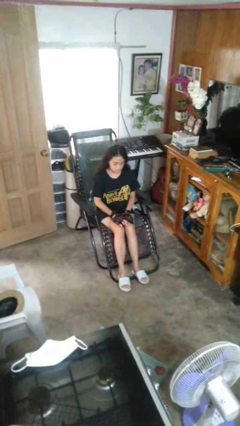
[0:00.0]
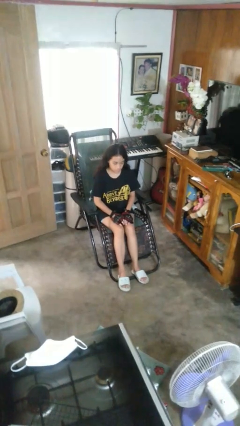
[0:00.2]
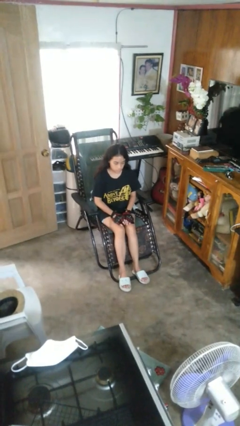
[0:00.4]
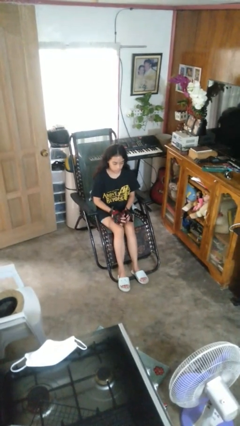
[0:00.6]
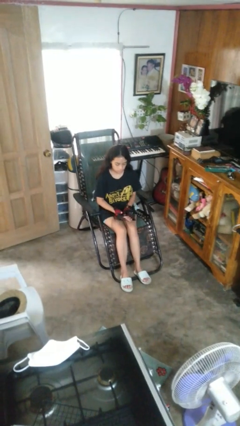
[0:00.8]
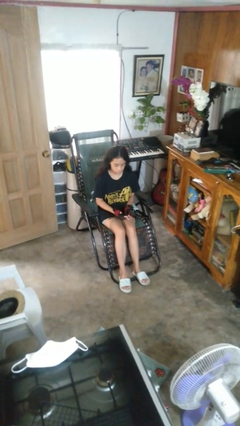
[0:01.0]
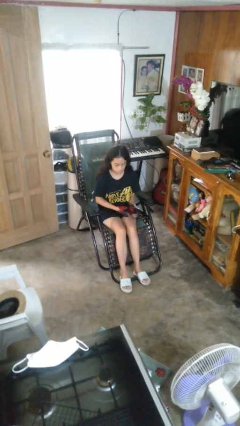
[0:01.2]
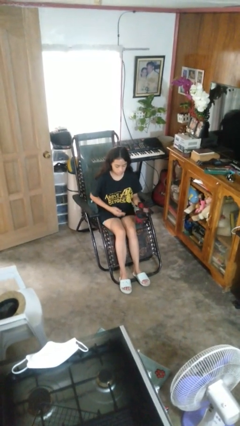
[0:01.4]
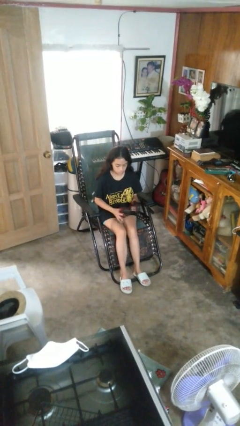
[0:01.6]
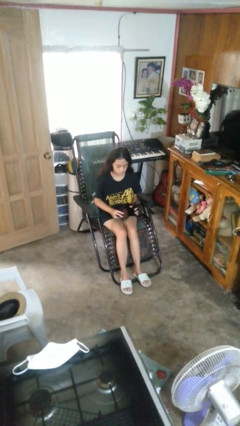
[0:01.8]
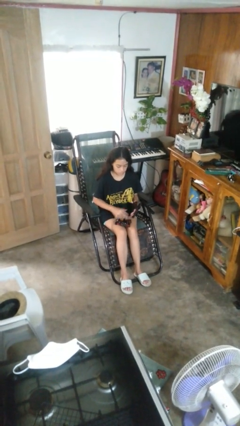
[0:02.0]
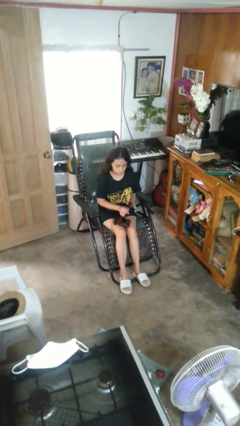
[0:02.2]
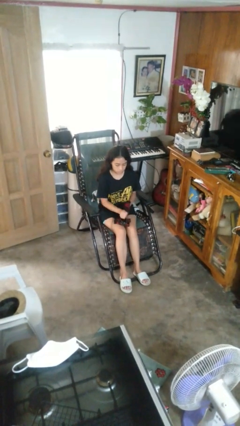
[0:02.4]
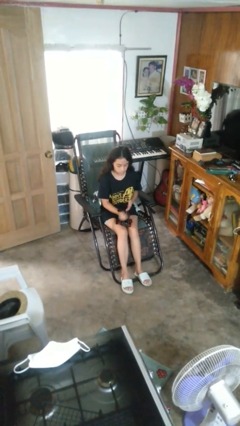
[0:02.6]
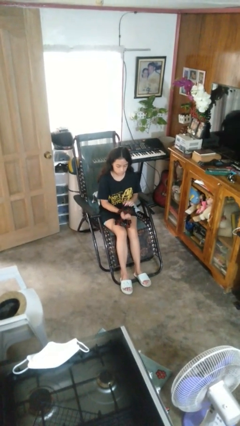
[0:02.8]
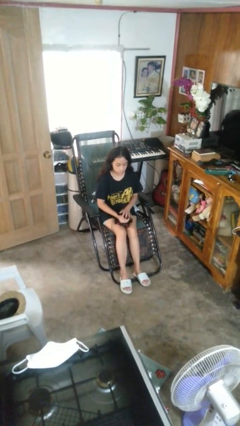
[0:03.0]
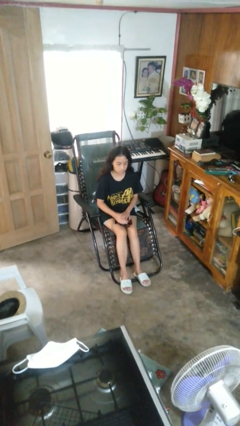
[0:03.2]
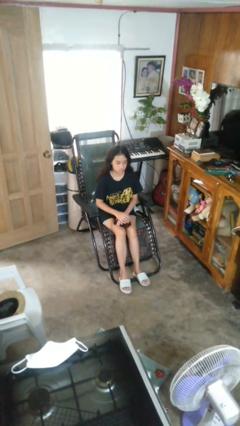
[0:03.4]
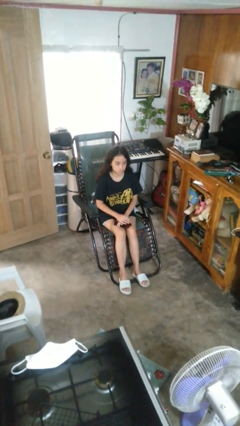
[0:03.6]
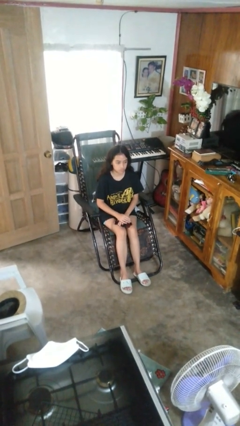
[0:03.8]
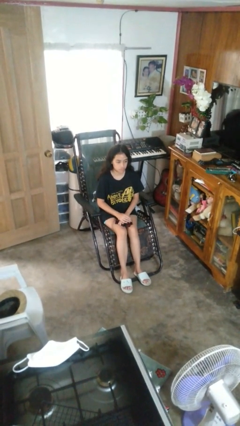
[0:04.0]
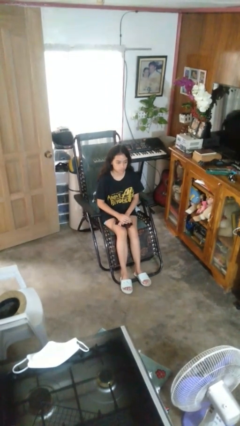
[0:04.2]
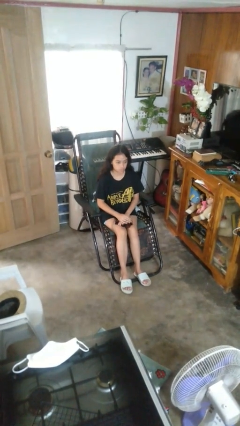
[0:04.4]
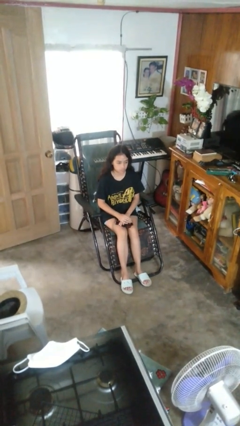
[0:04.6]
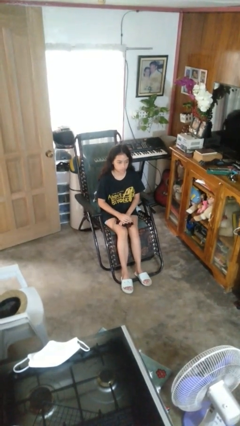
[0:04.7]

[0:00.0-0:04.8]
person takes off gloves

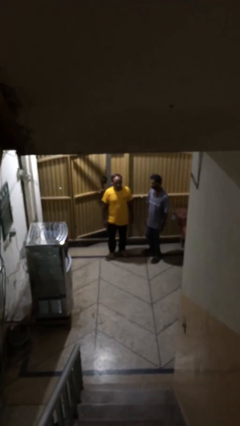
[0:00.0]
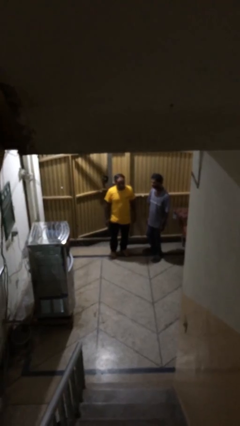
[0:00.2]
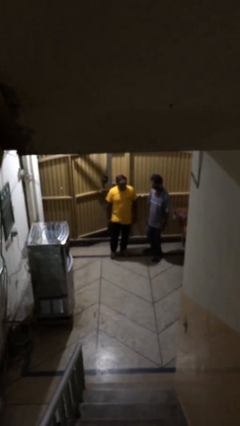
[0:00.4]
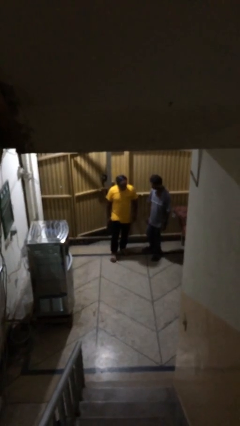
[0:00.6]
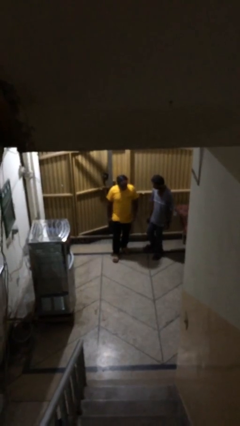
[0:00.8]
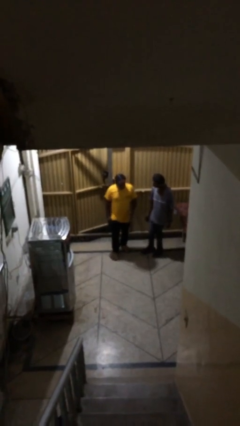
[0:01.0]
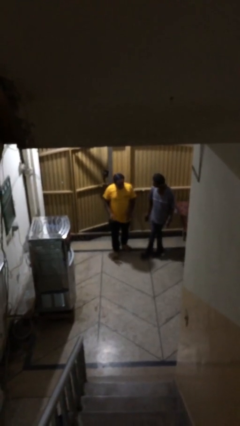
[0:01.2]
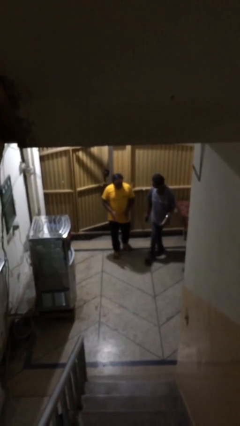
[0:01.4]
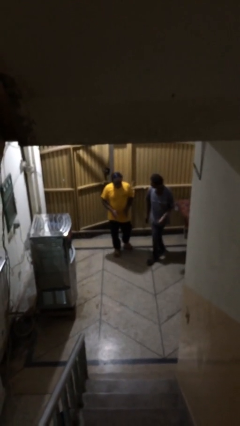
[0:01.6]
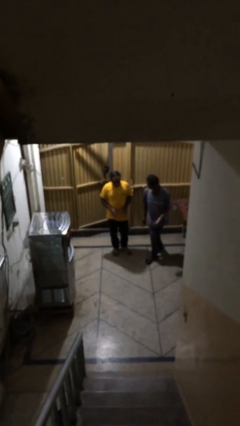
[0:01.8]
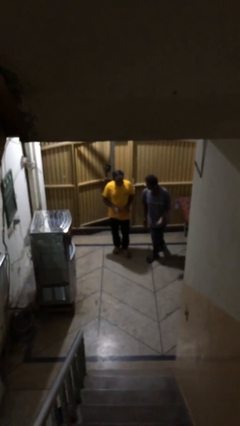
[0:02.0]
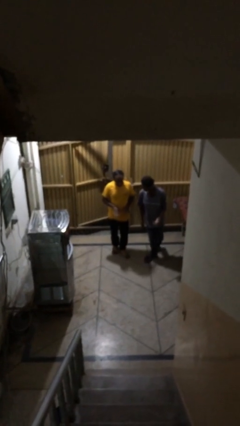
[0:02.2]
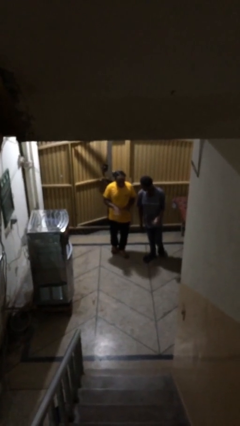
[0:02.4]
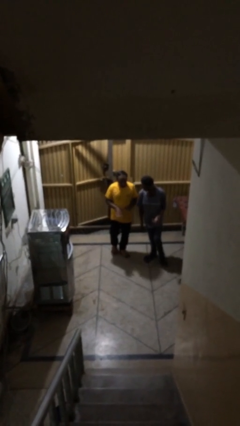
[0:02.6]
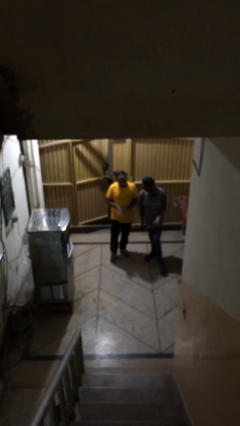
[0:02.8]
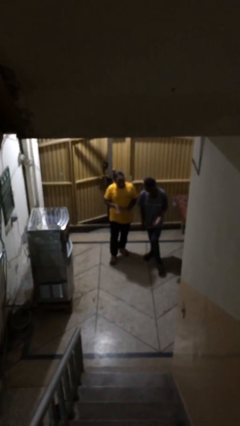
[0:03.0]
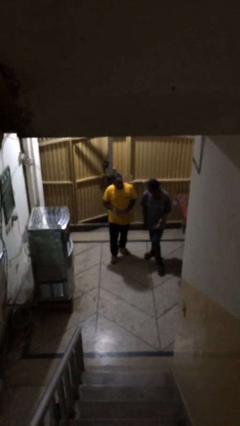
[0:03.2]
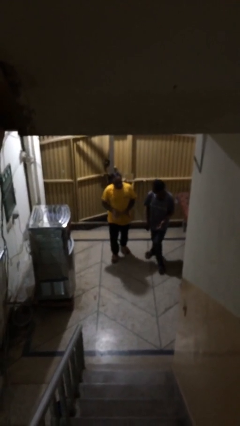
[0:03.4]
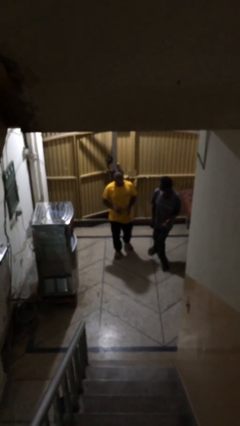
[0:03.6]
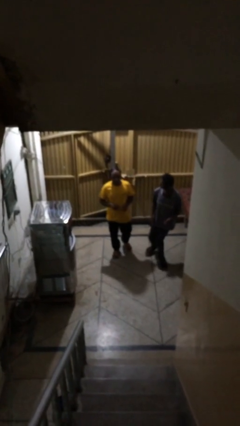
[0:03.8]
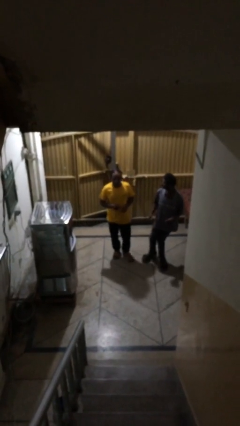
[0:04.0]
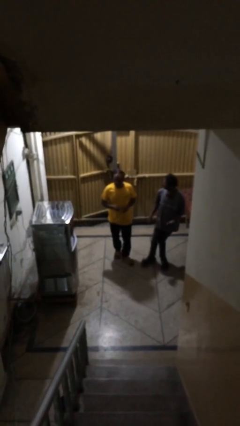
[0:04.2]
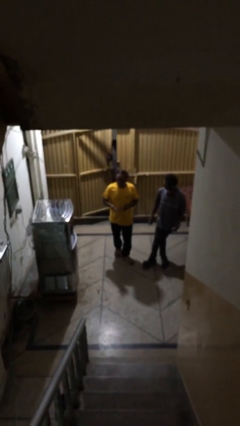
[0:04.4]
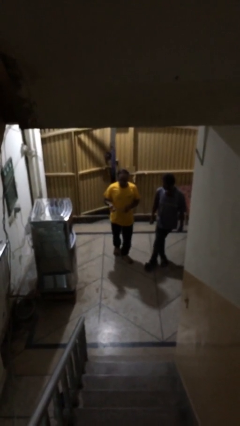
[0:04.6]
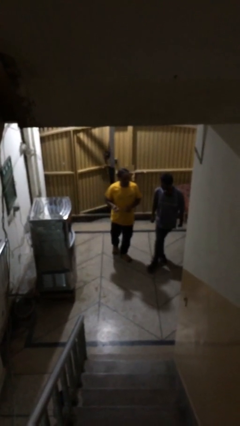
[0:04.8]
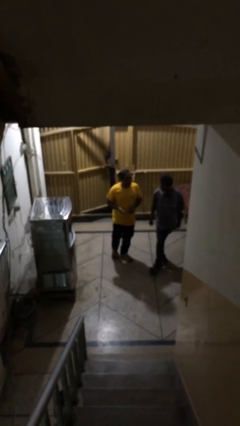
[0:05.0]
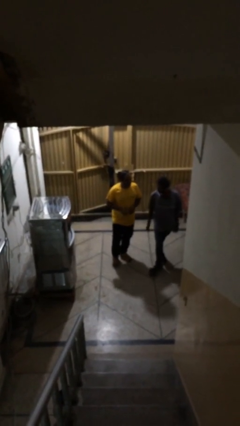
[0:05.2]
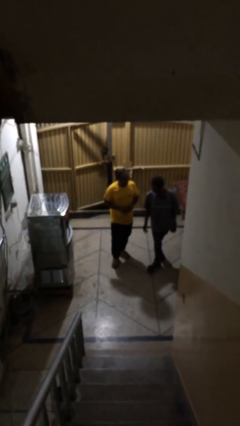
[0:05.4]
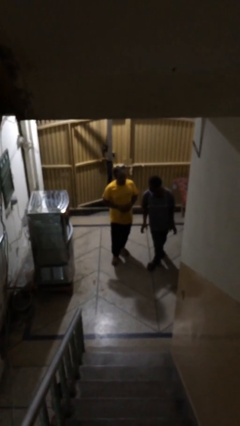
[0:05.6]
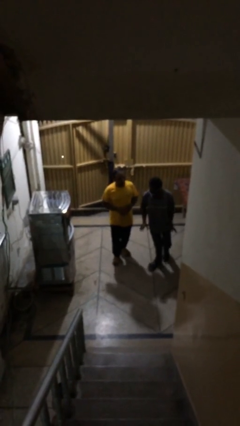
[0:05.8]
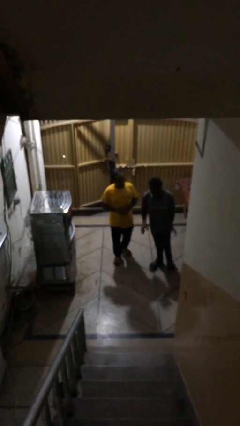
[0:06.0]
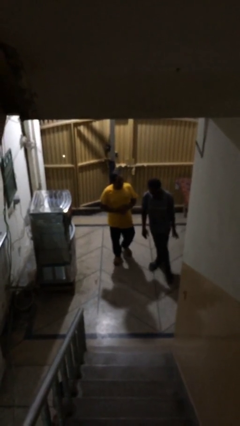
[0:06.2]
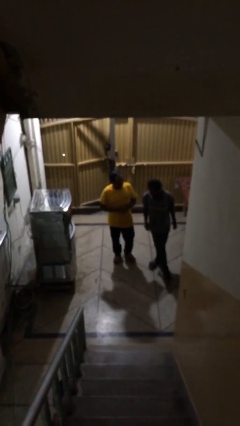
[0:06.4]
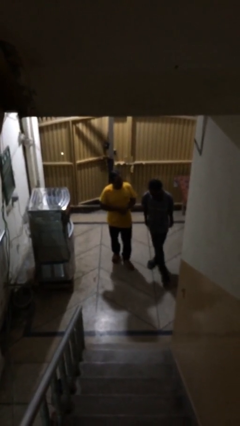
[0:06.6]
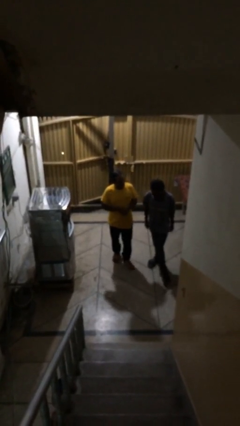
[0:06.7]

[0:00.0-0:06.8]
person talks to person

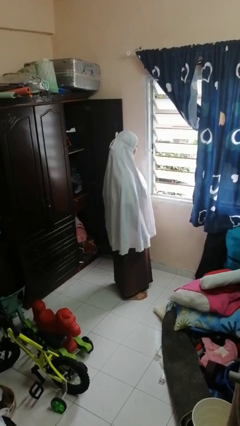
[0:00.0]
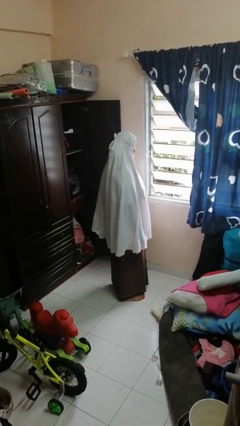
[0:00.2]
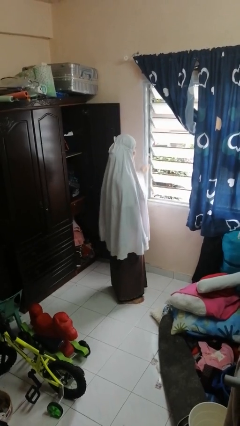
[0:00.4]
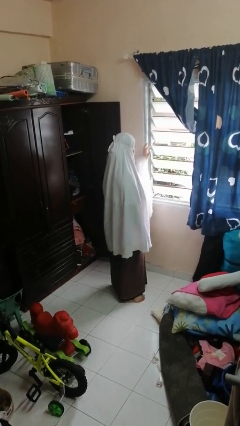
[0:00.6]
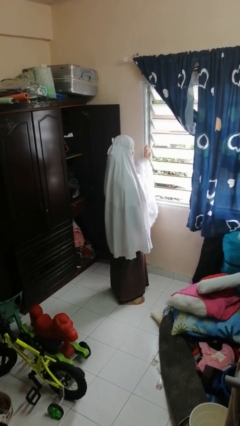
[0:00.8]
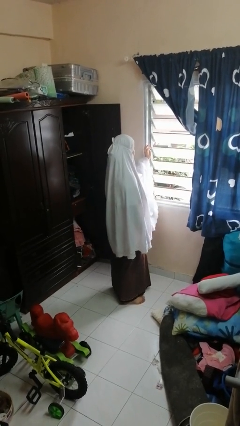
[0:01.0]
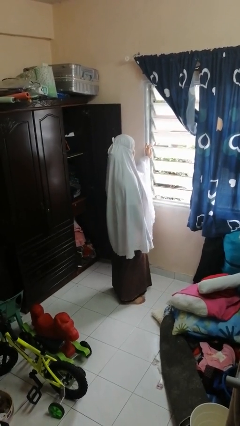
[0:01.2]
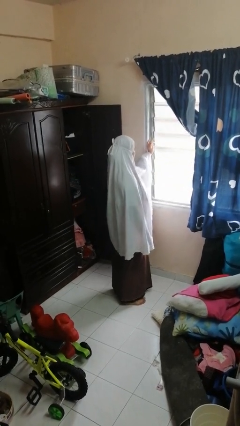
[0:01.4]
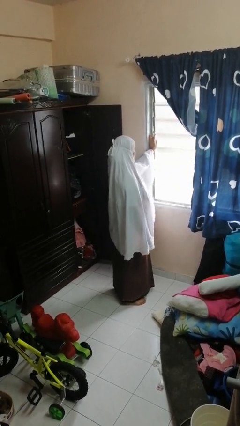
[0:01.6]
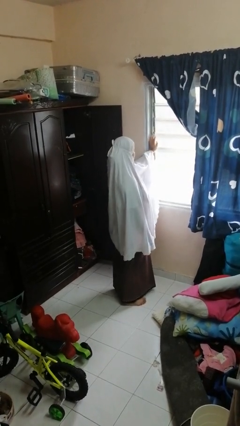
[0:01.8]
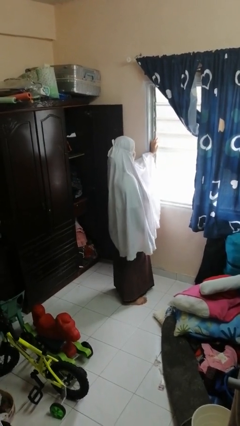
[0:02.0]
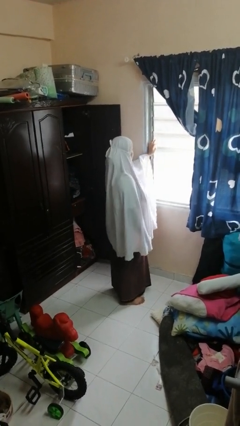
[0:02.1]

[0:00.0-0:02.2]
person closes home window

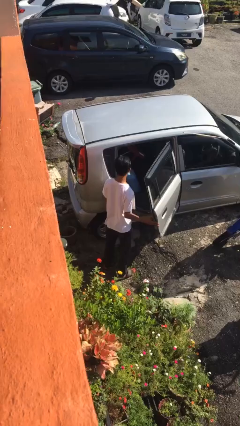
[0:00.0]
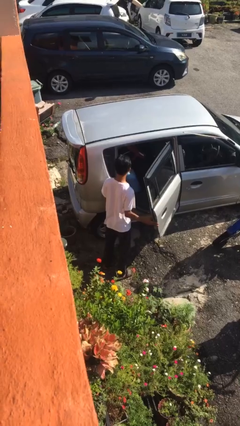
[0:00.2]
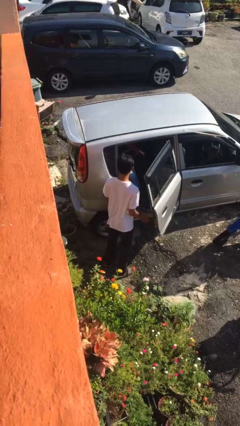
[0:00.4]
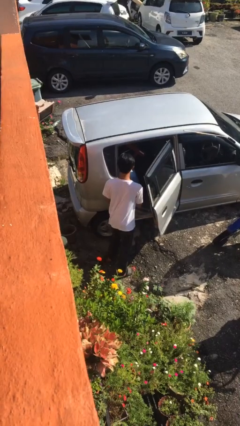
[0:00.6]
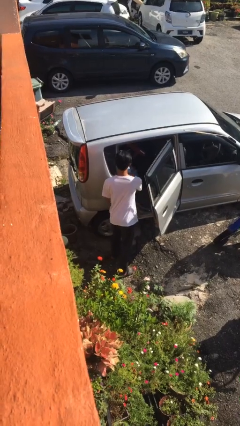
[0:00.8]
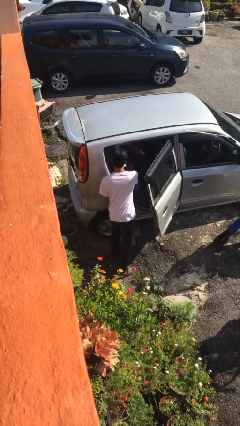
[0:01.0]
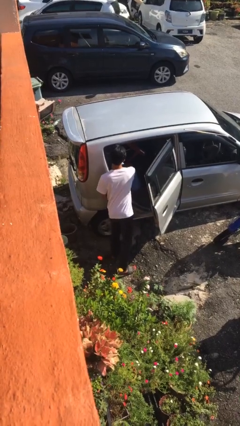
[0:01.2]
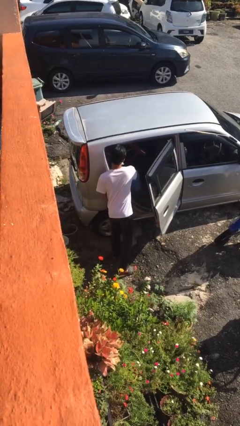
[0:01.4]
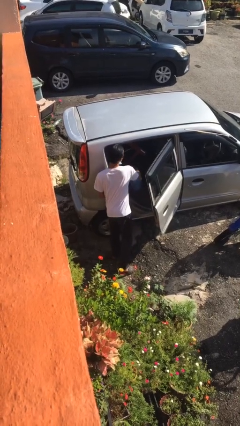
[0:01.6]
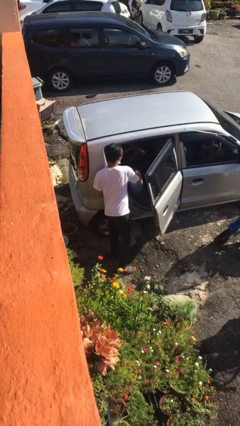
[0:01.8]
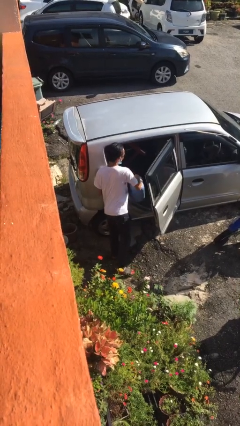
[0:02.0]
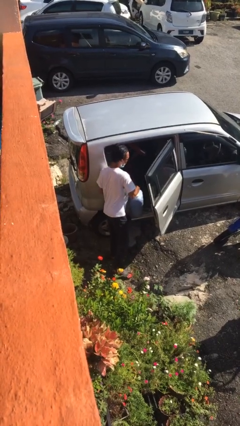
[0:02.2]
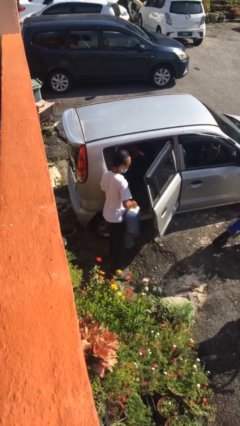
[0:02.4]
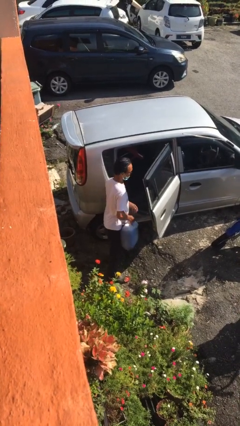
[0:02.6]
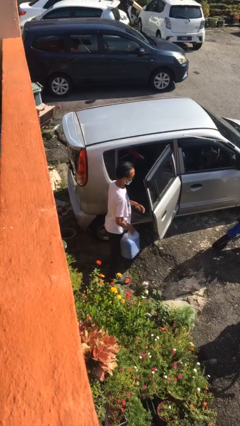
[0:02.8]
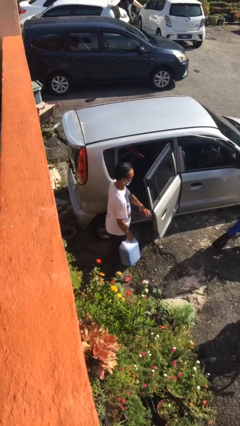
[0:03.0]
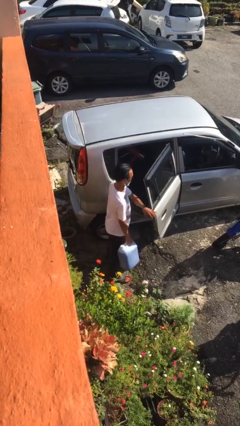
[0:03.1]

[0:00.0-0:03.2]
person unloads car

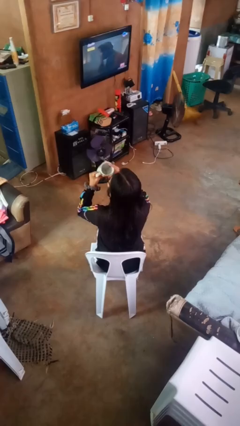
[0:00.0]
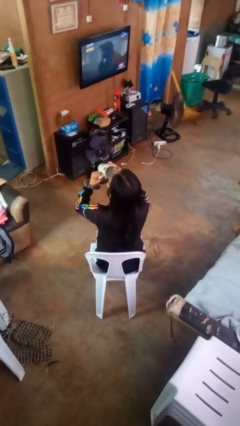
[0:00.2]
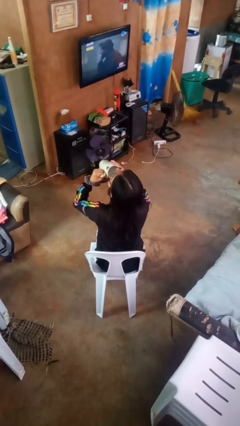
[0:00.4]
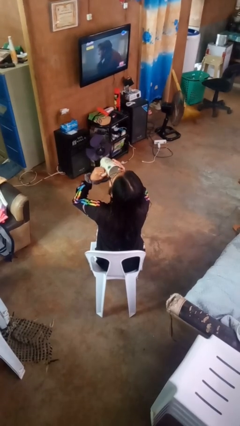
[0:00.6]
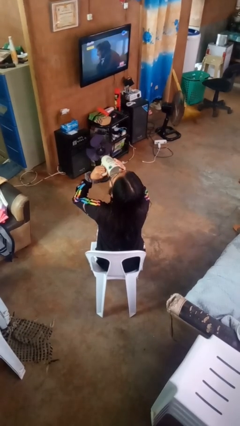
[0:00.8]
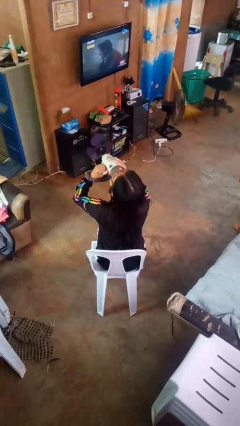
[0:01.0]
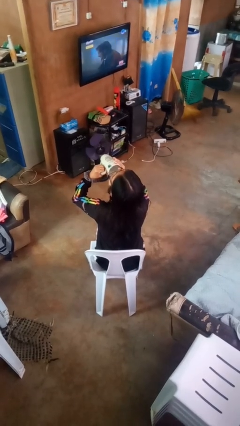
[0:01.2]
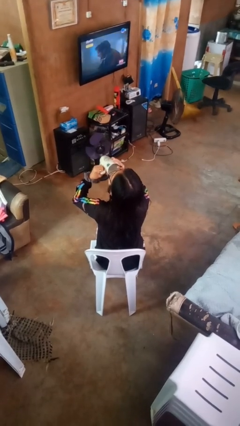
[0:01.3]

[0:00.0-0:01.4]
person drinks from mug
